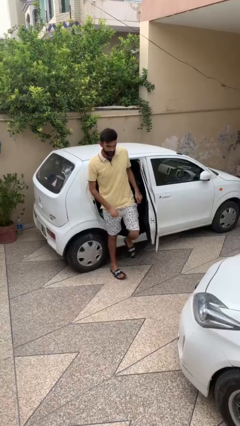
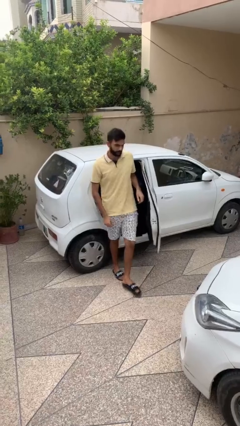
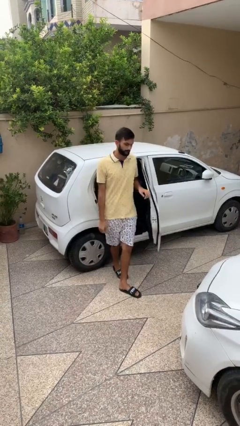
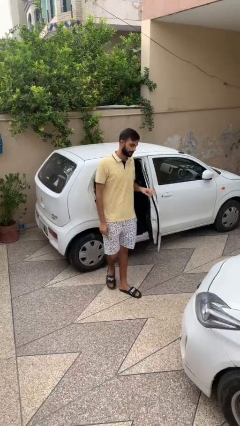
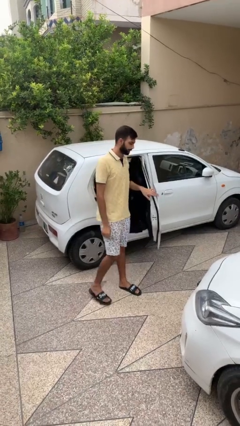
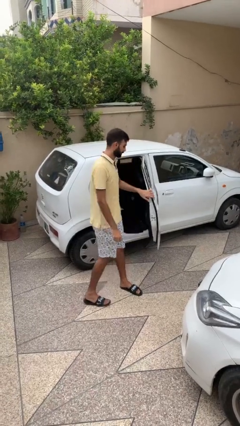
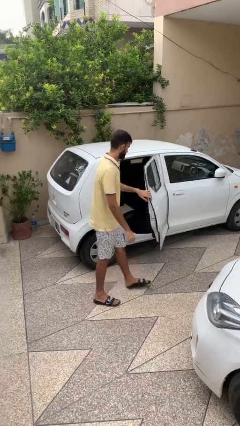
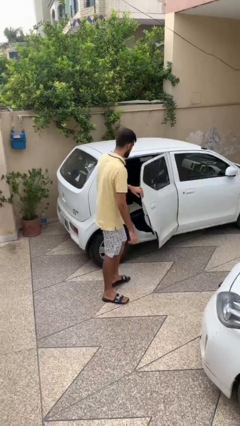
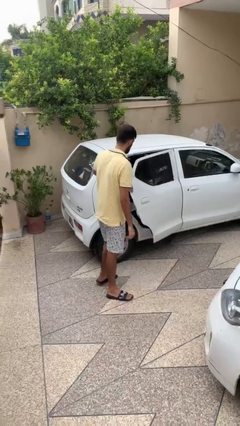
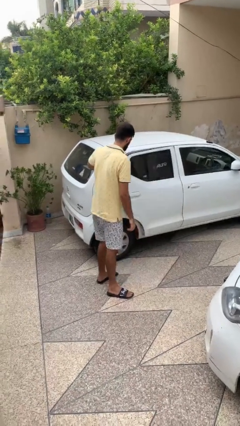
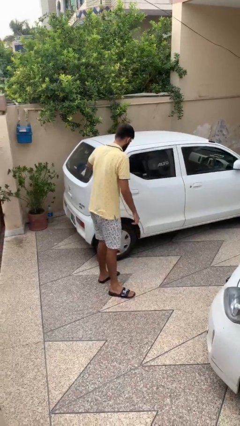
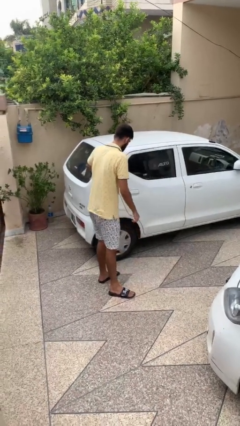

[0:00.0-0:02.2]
person closes car door

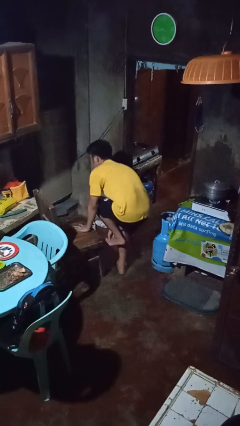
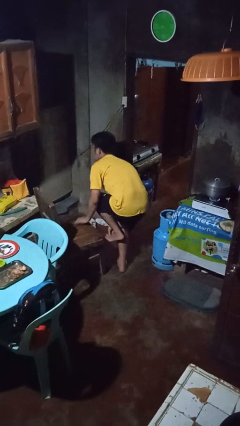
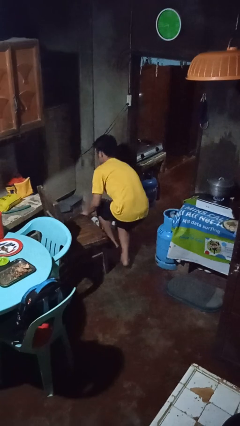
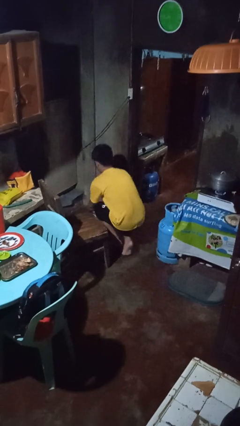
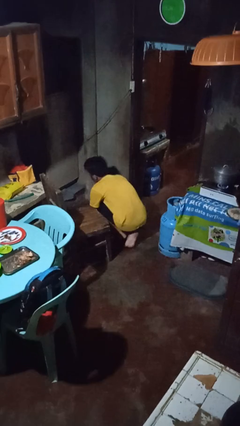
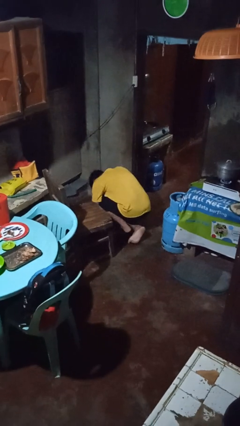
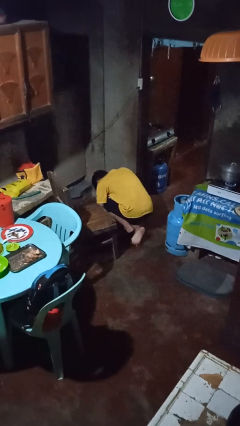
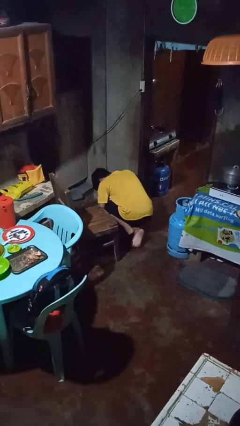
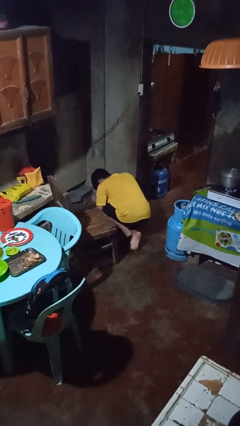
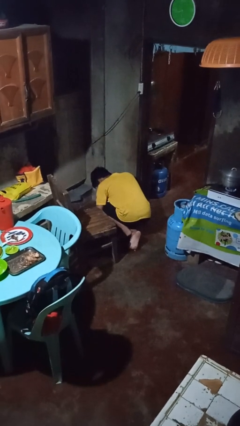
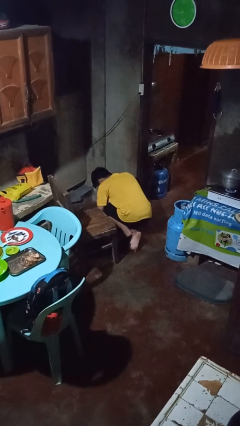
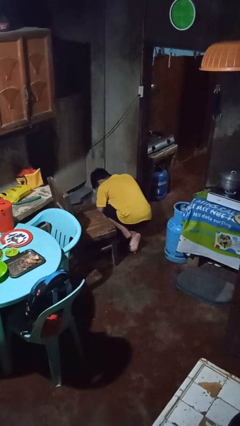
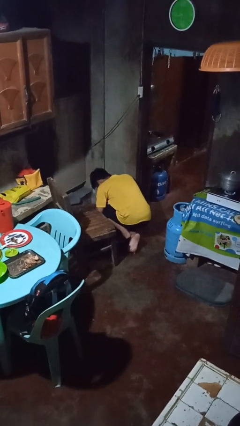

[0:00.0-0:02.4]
person lies down on floor

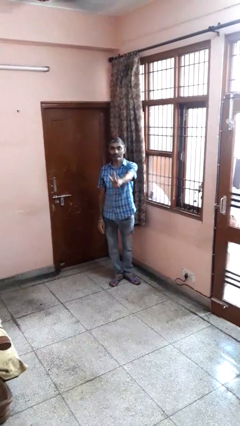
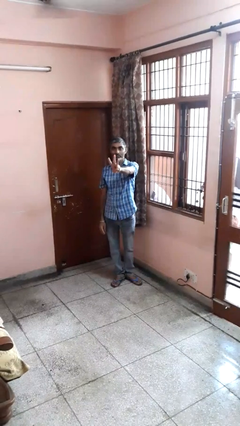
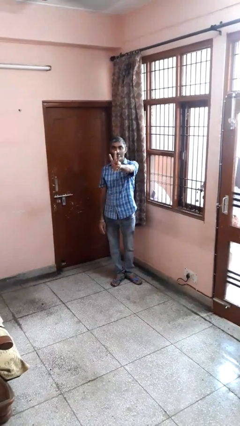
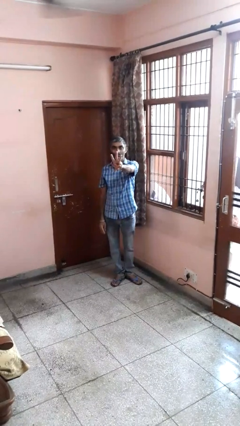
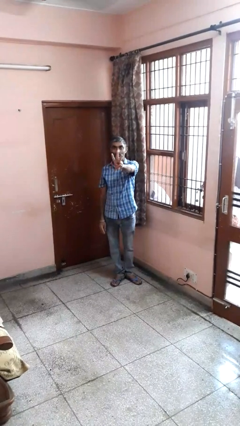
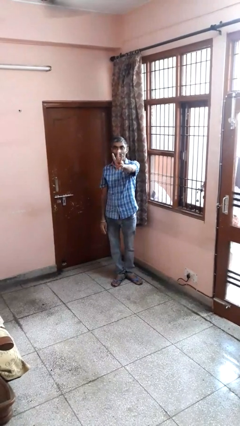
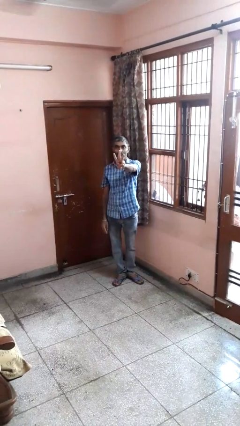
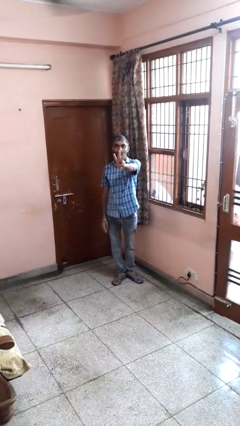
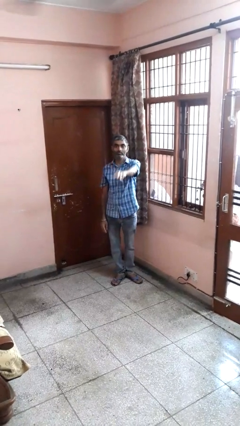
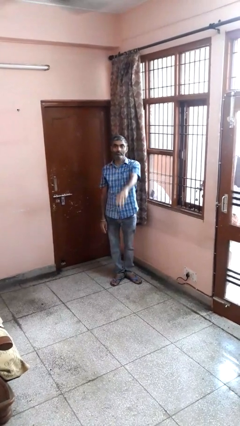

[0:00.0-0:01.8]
person gestures number three

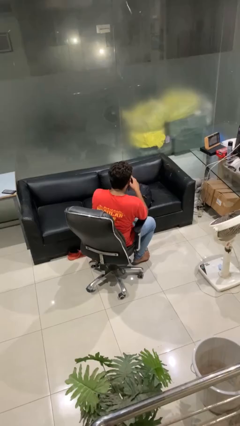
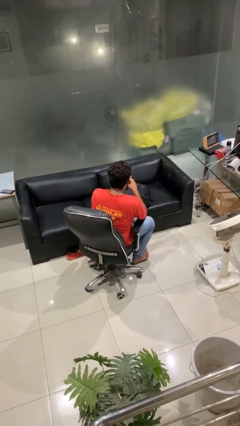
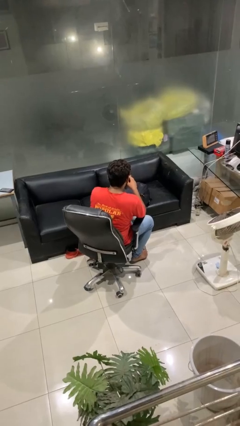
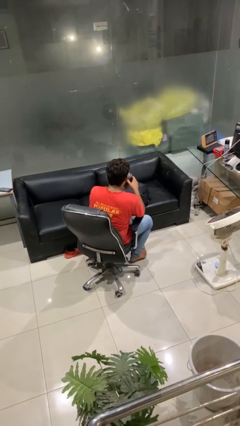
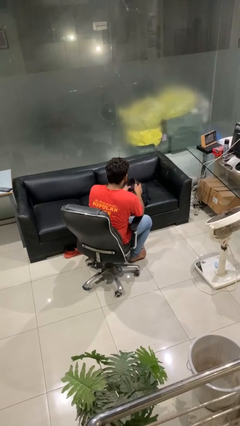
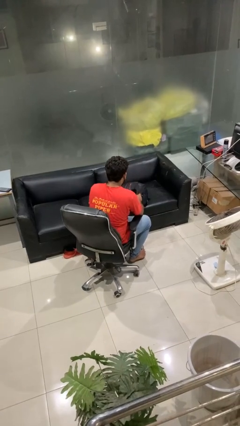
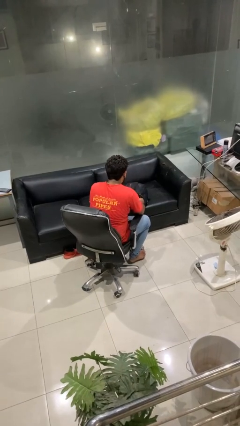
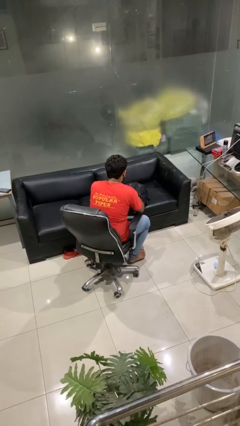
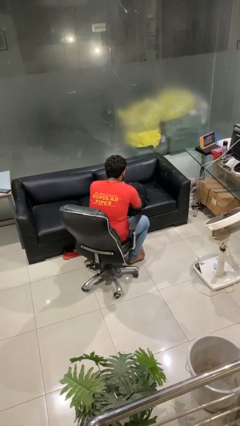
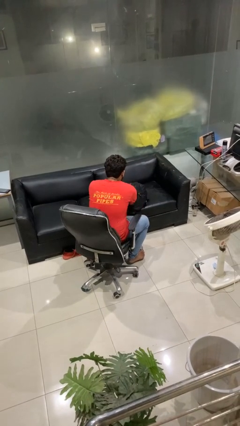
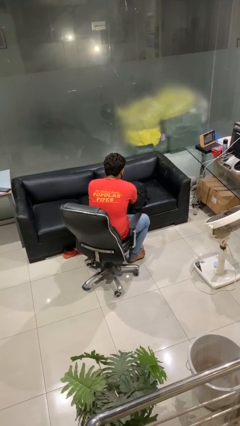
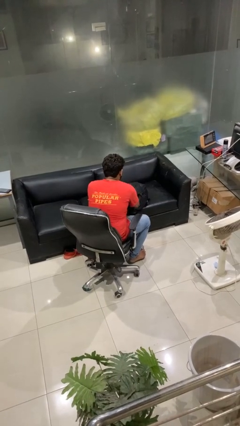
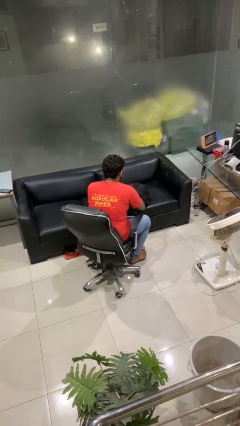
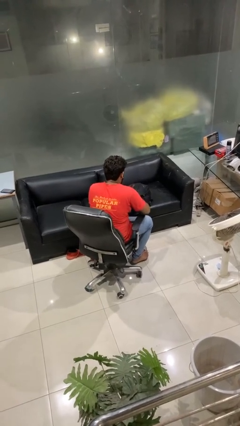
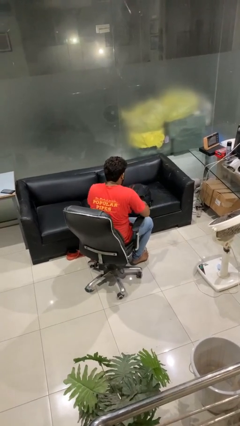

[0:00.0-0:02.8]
person puts object into backpack

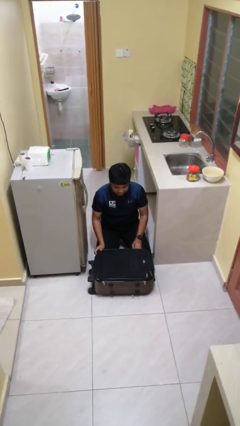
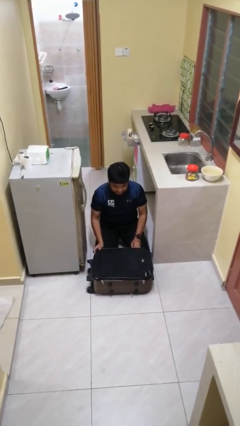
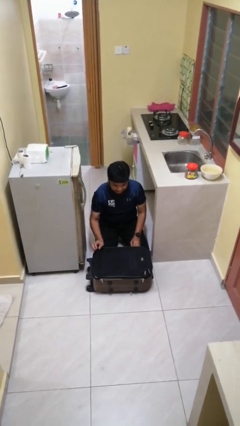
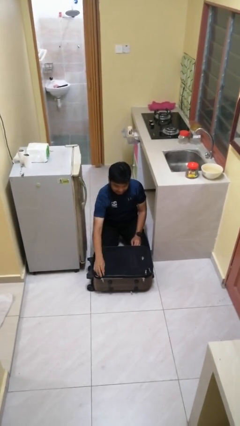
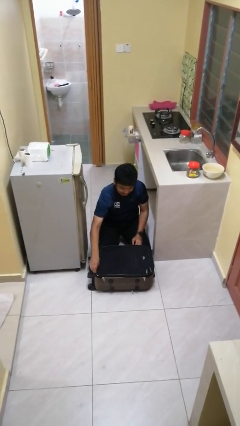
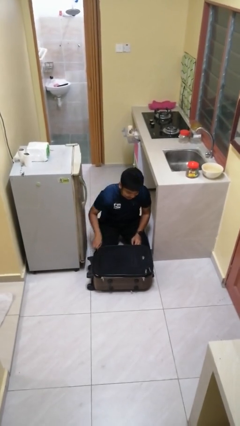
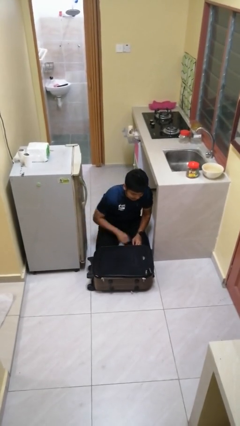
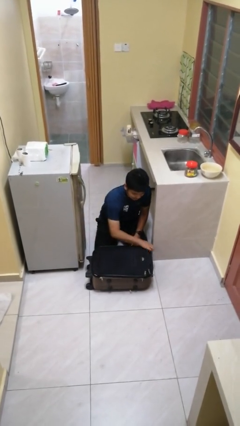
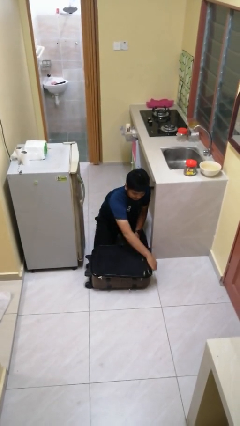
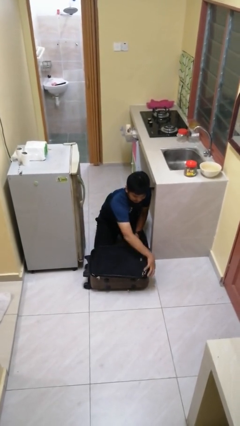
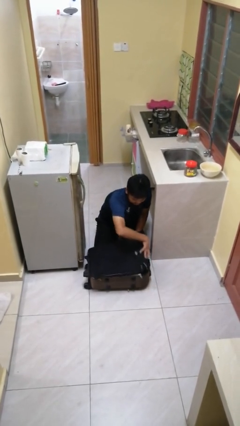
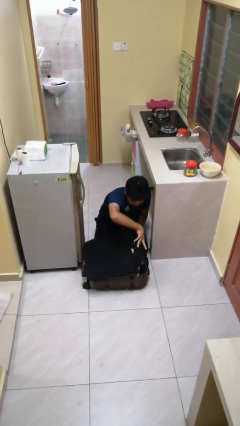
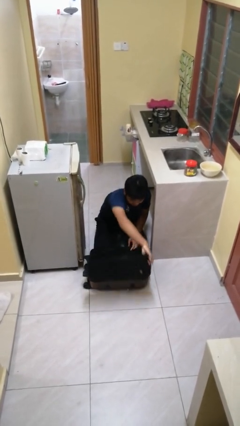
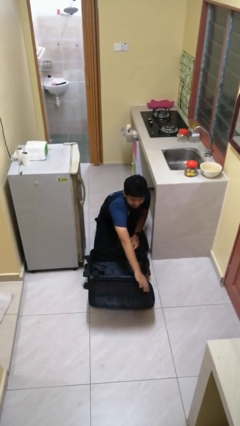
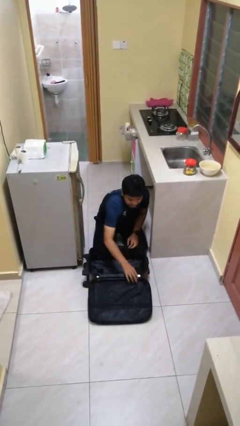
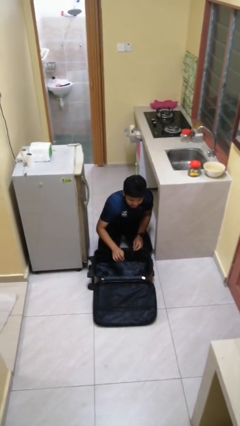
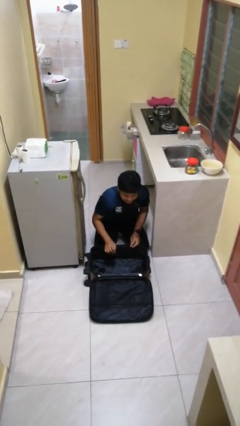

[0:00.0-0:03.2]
person opens suitcase

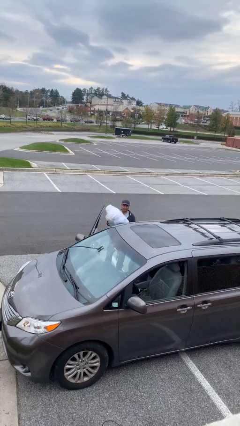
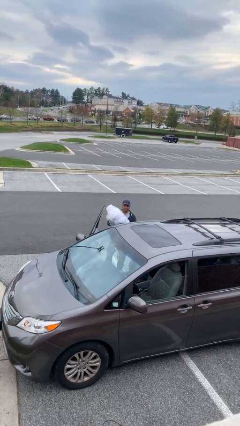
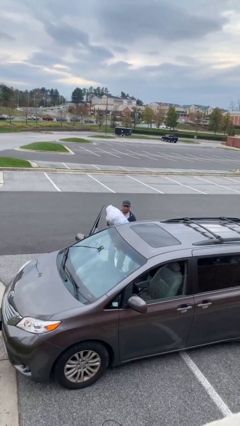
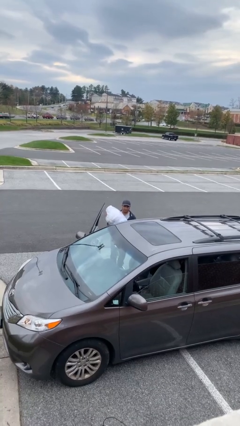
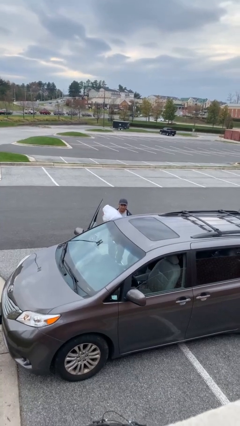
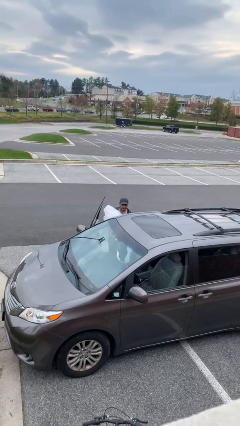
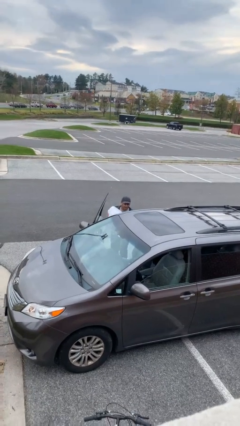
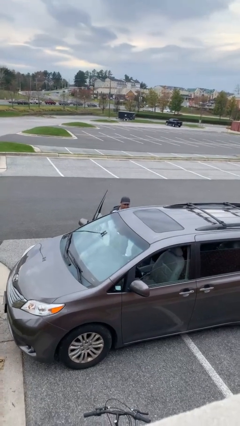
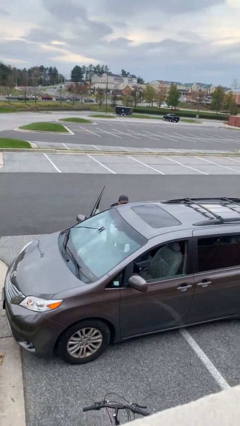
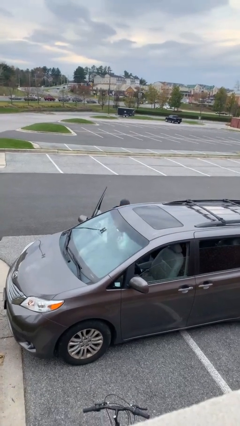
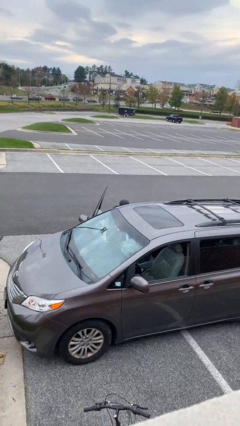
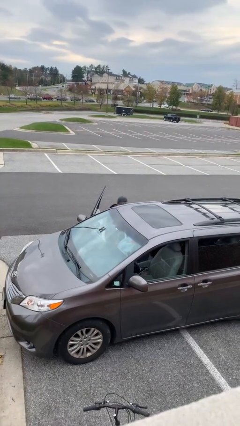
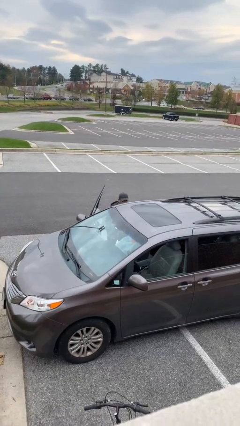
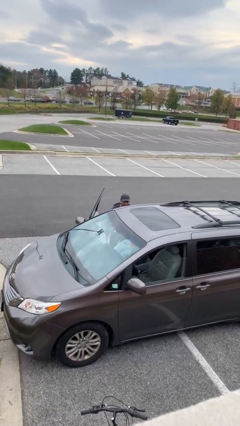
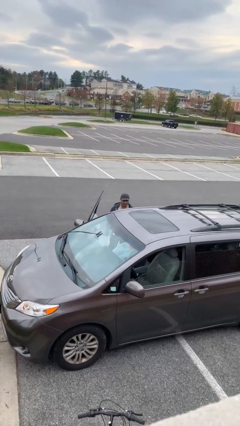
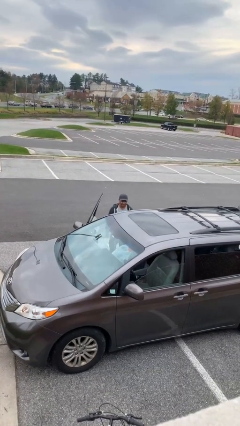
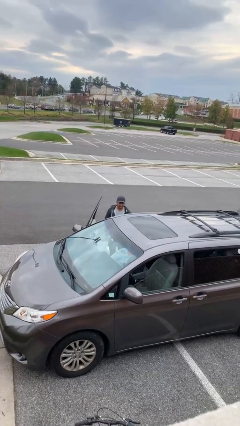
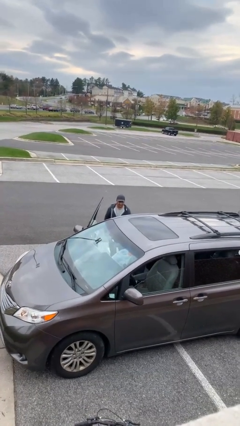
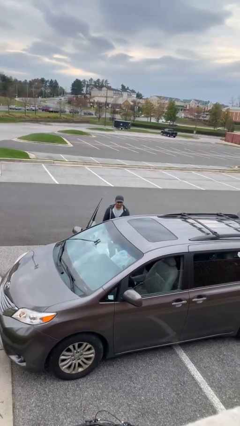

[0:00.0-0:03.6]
person loads car

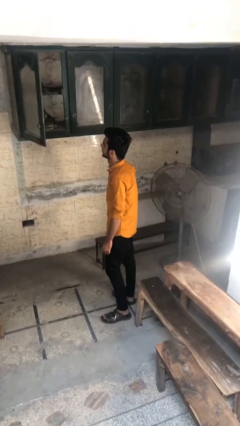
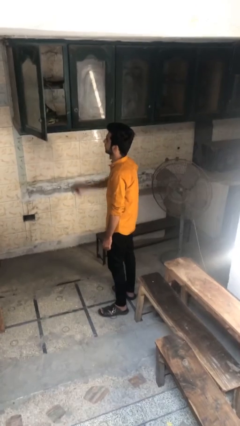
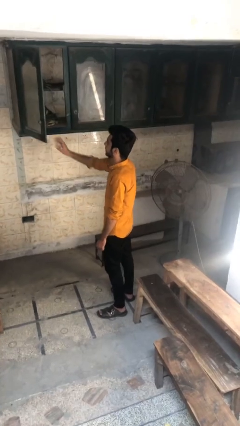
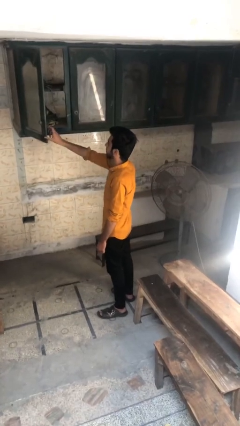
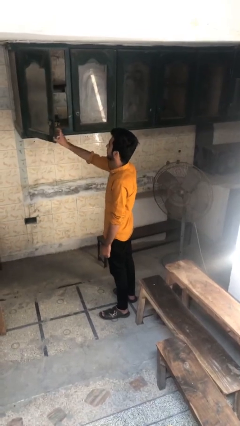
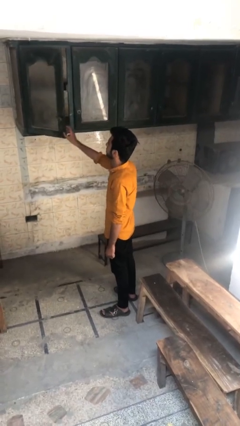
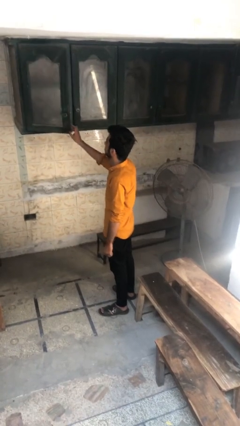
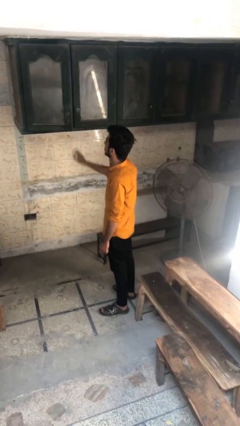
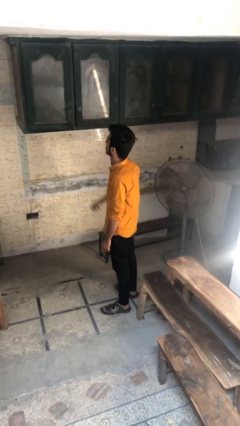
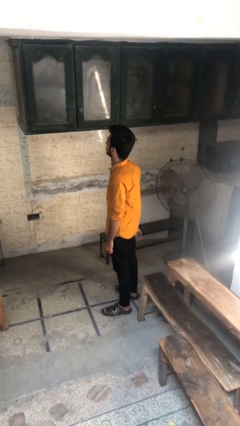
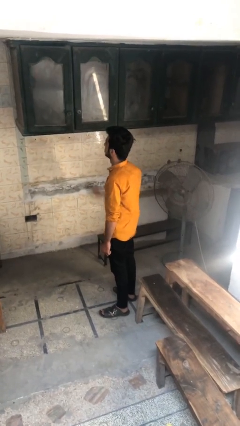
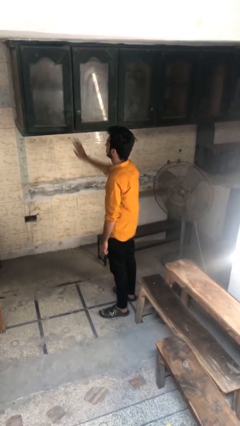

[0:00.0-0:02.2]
person closes cabinet
